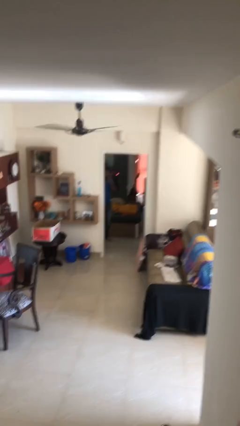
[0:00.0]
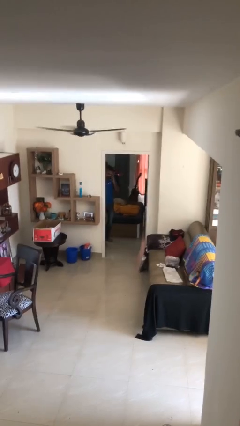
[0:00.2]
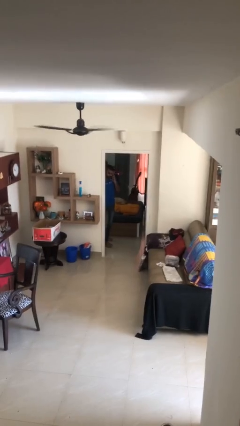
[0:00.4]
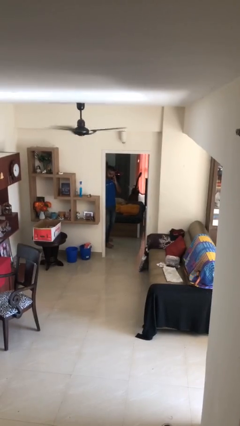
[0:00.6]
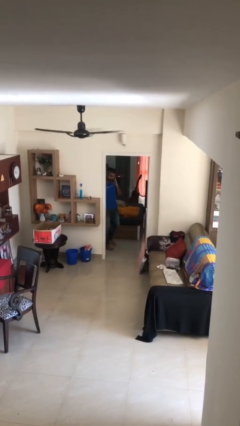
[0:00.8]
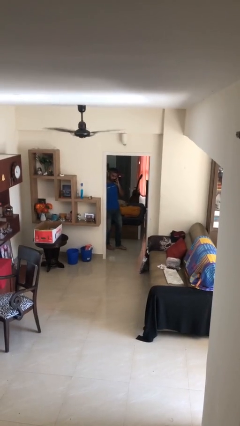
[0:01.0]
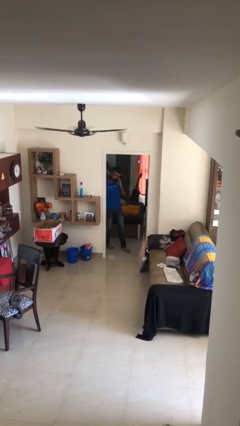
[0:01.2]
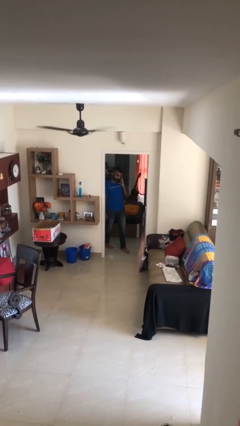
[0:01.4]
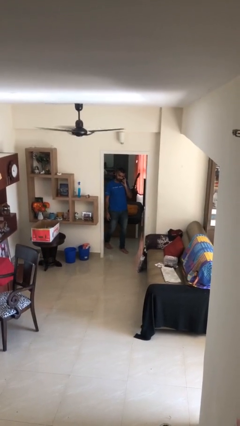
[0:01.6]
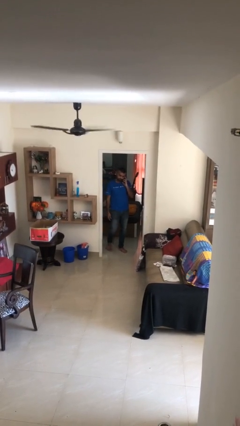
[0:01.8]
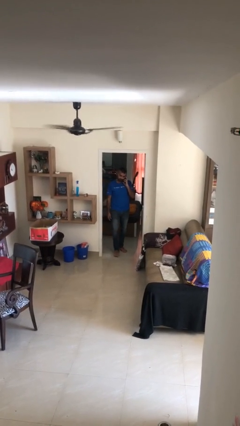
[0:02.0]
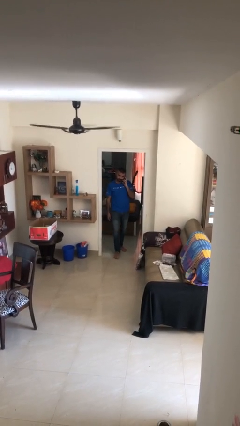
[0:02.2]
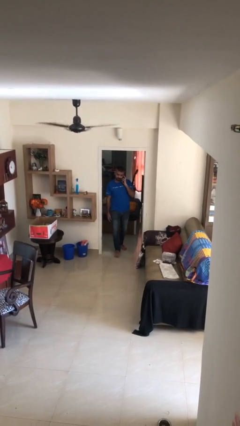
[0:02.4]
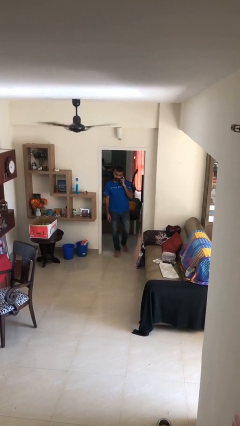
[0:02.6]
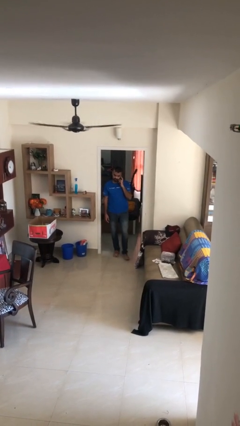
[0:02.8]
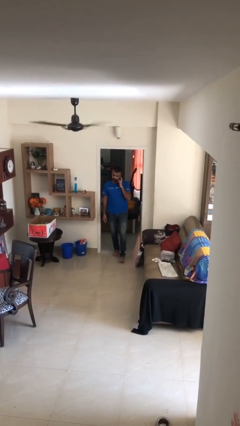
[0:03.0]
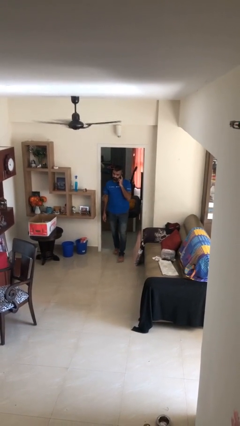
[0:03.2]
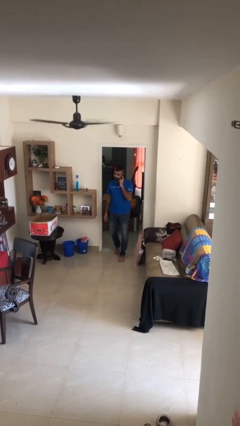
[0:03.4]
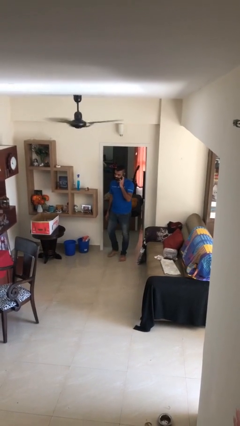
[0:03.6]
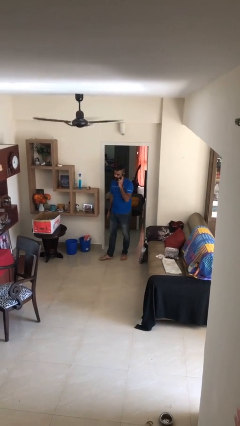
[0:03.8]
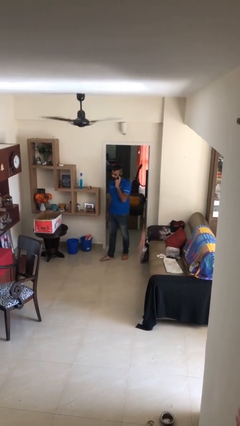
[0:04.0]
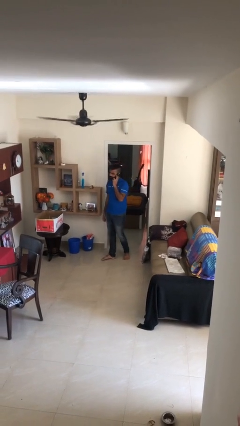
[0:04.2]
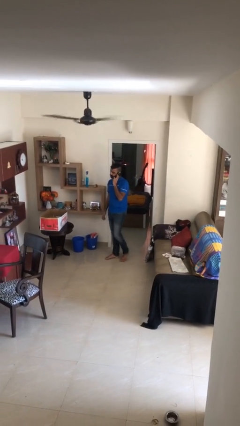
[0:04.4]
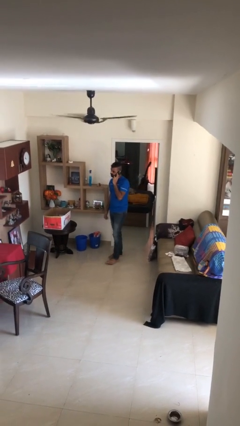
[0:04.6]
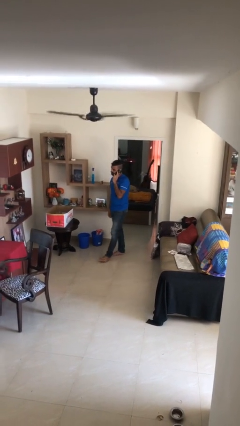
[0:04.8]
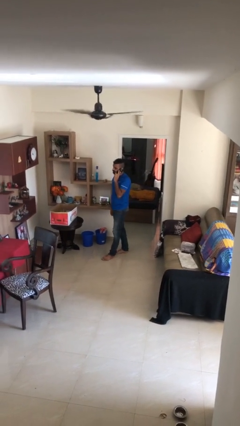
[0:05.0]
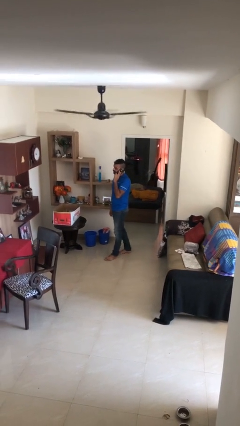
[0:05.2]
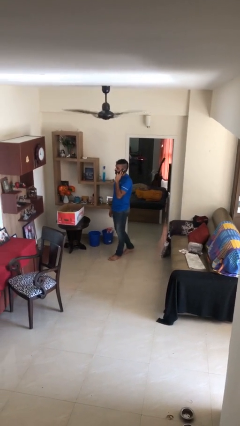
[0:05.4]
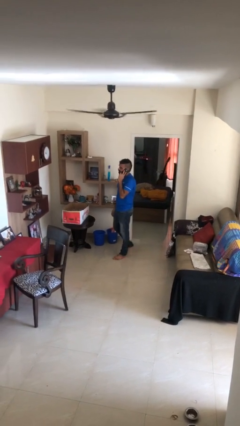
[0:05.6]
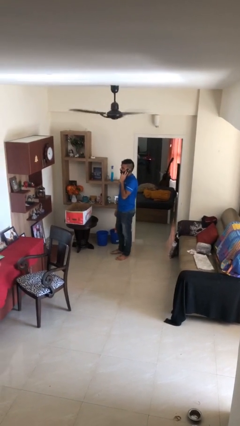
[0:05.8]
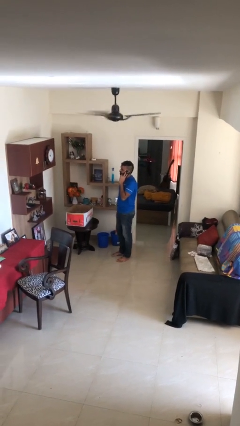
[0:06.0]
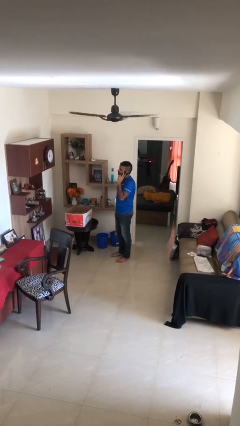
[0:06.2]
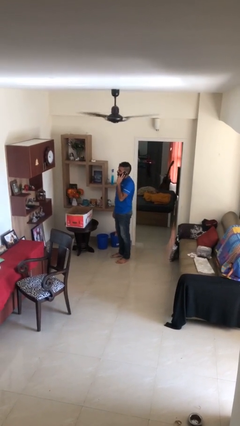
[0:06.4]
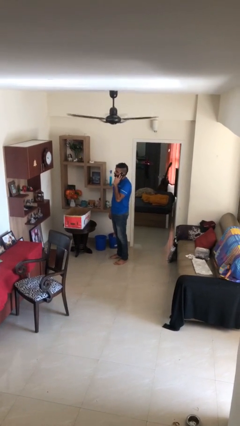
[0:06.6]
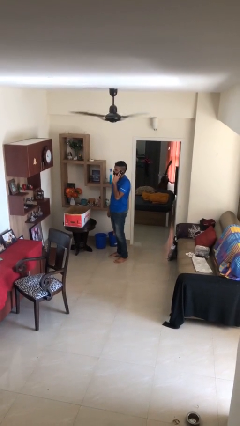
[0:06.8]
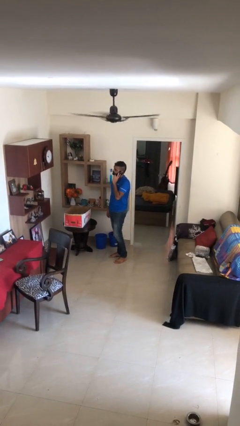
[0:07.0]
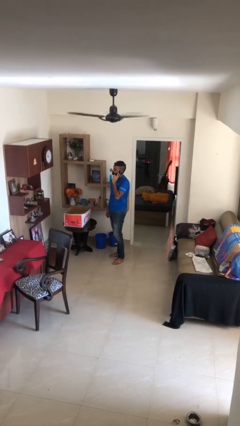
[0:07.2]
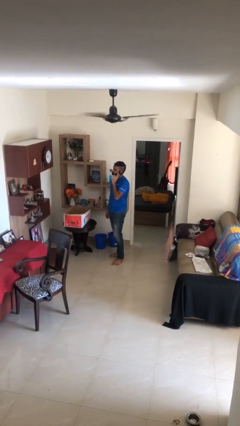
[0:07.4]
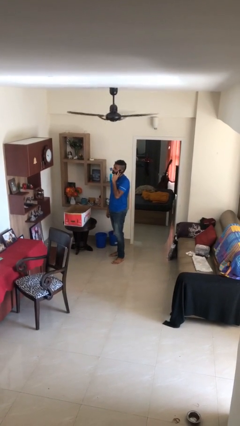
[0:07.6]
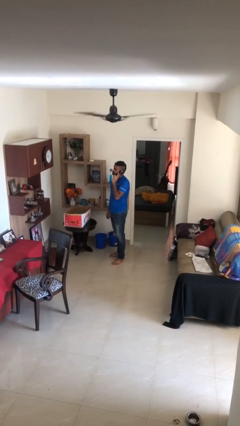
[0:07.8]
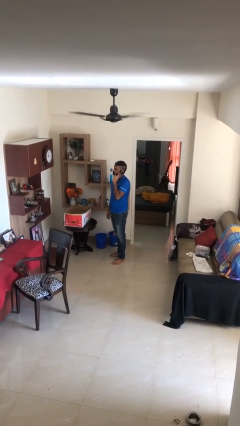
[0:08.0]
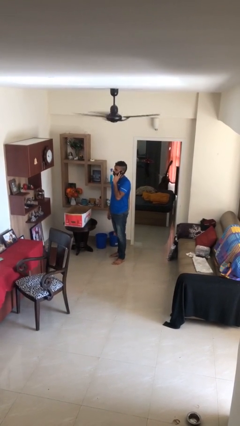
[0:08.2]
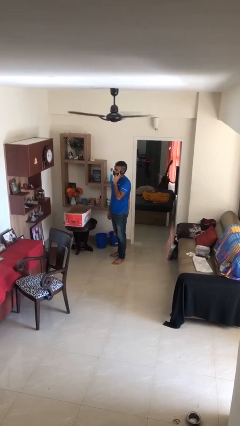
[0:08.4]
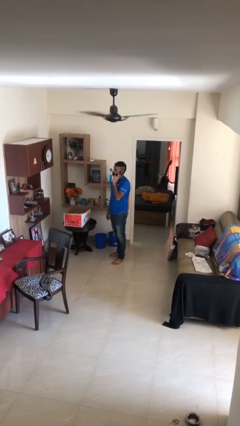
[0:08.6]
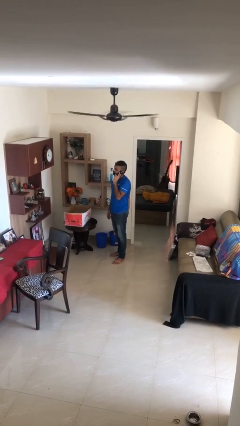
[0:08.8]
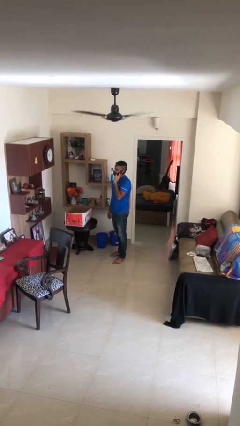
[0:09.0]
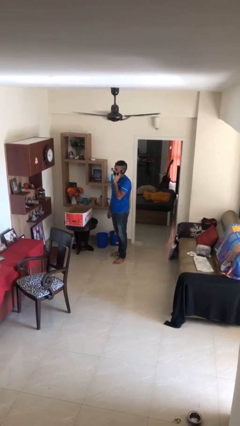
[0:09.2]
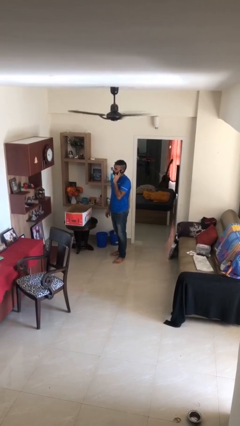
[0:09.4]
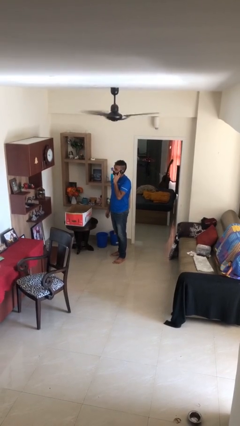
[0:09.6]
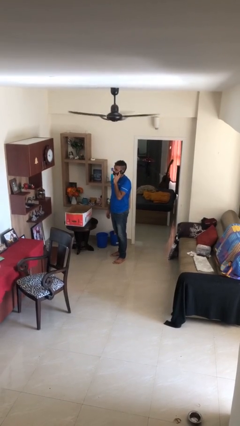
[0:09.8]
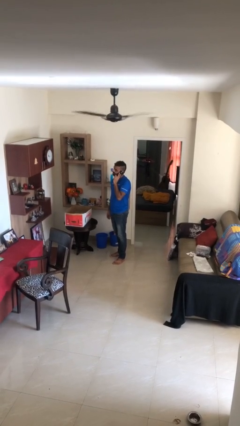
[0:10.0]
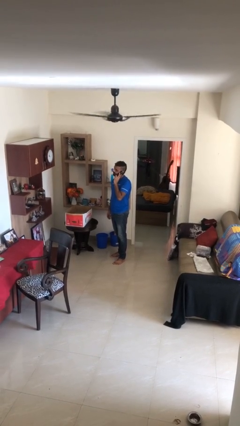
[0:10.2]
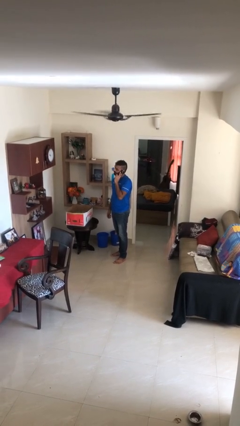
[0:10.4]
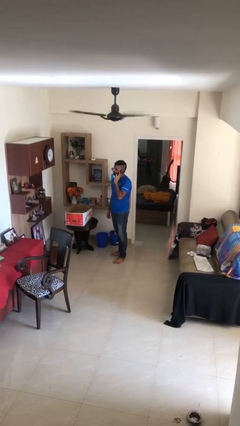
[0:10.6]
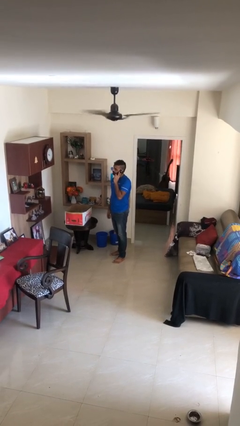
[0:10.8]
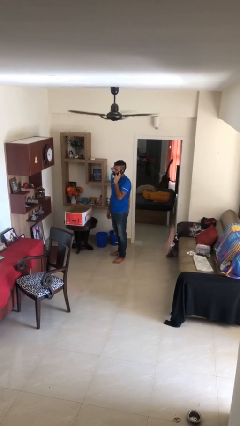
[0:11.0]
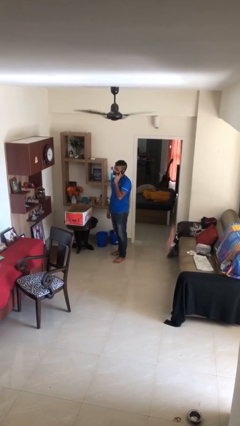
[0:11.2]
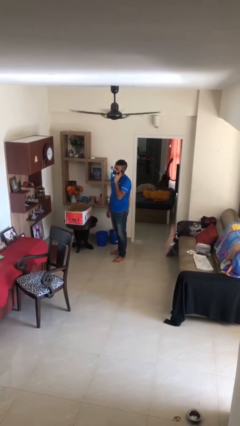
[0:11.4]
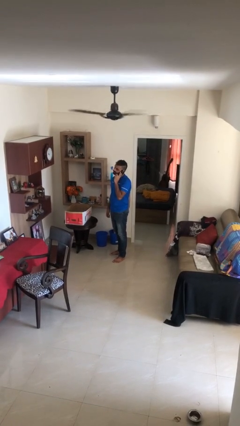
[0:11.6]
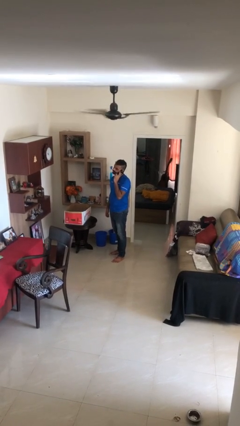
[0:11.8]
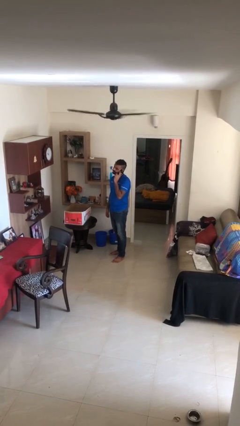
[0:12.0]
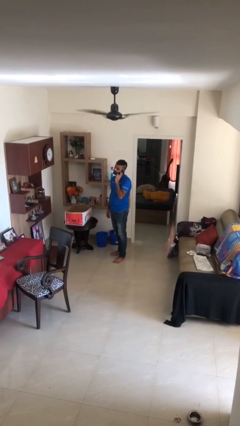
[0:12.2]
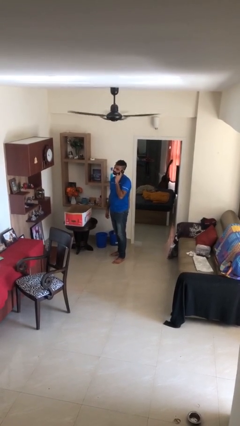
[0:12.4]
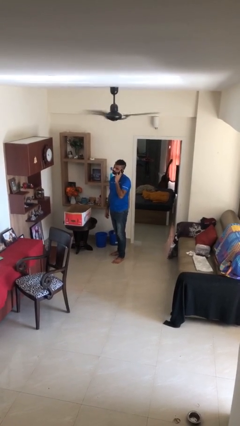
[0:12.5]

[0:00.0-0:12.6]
person enters scene through structure

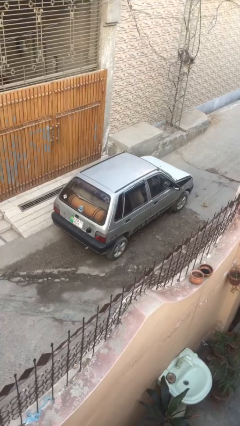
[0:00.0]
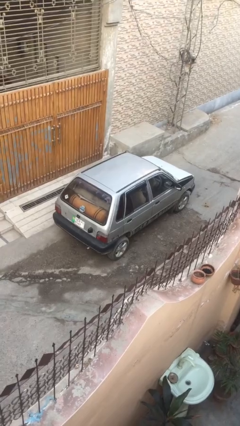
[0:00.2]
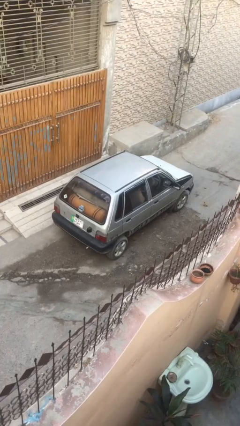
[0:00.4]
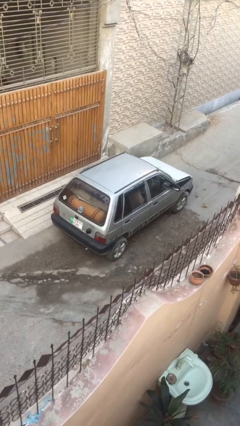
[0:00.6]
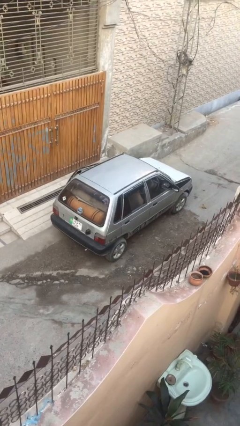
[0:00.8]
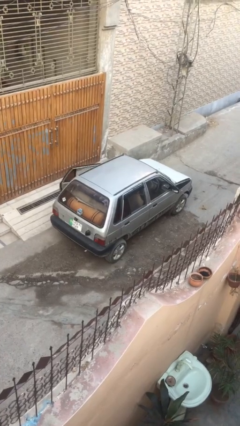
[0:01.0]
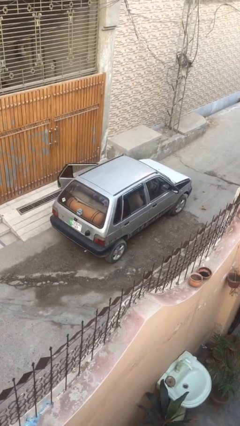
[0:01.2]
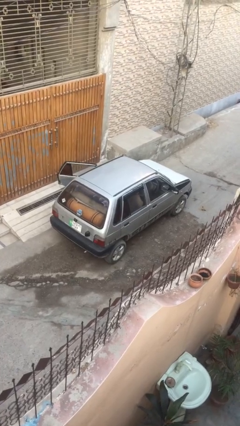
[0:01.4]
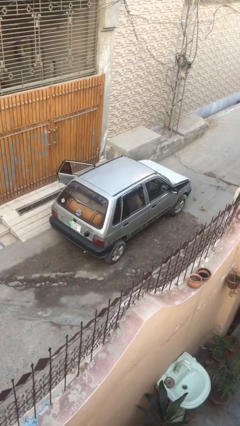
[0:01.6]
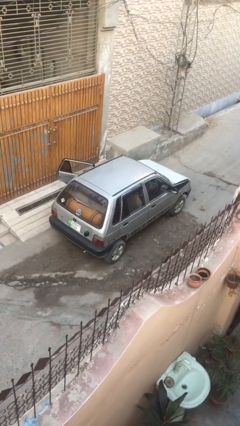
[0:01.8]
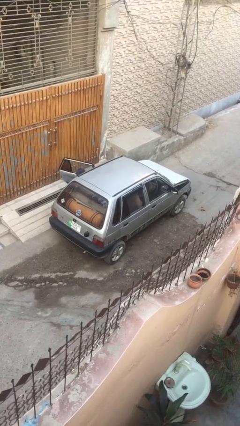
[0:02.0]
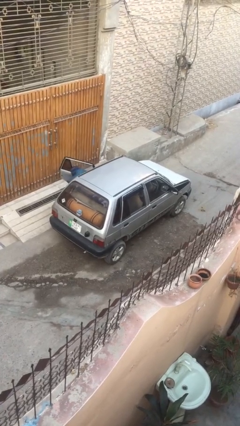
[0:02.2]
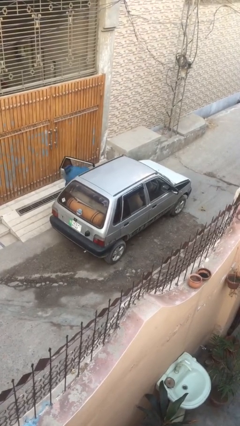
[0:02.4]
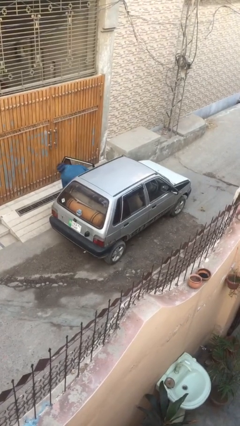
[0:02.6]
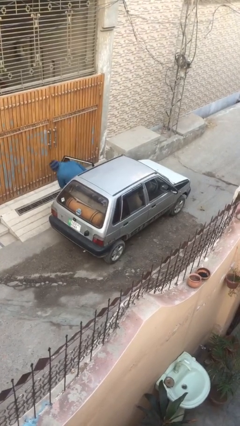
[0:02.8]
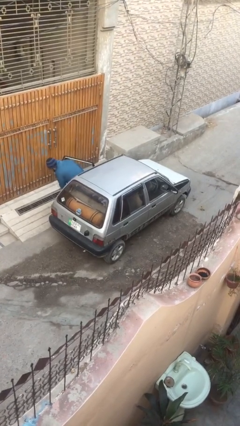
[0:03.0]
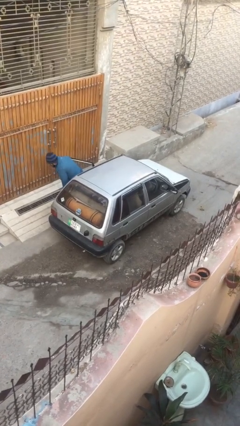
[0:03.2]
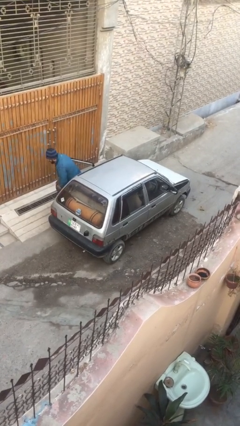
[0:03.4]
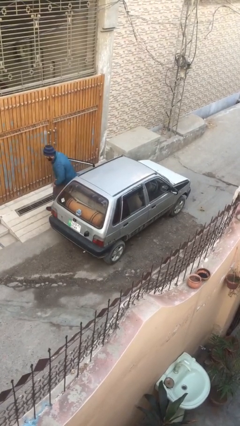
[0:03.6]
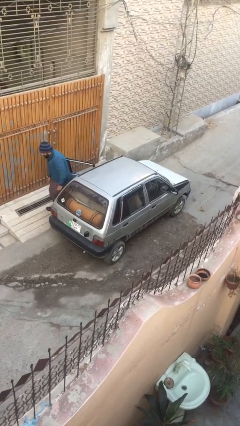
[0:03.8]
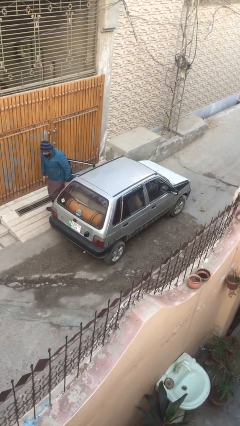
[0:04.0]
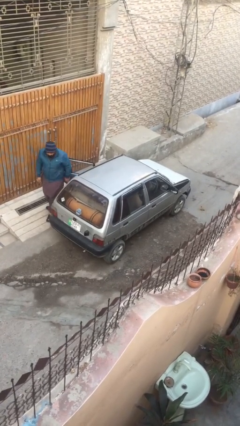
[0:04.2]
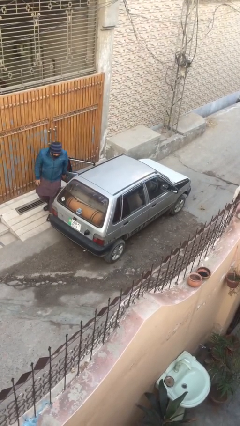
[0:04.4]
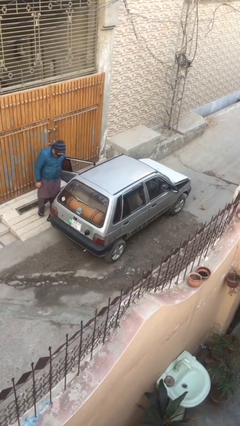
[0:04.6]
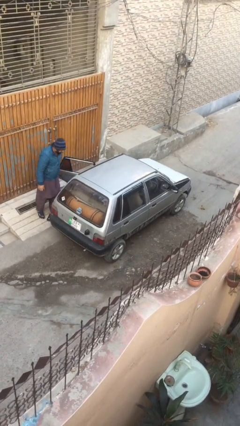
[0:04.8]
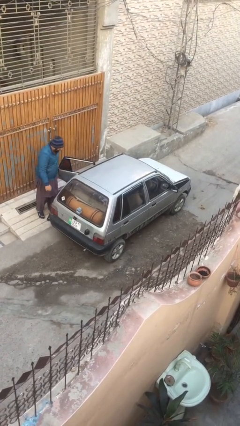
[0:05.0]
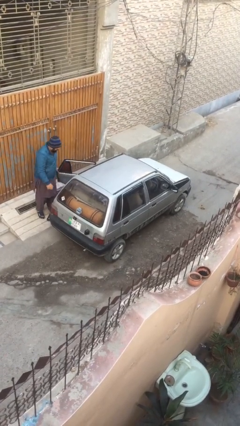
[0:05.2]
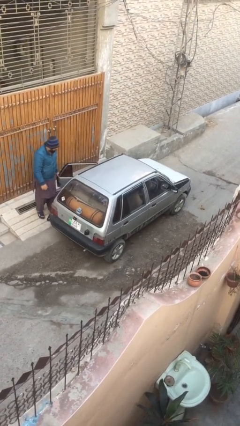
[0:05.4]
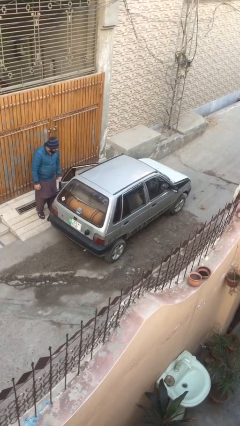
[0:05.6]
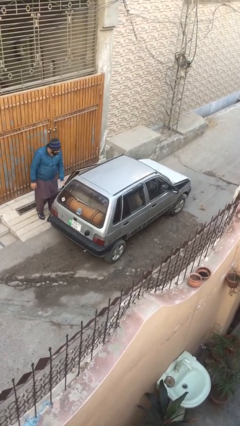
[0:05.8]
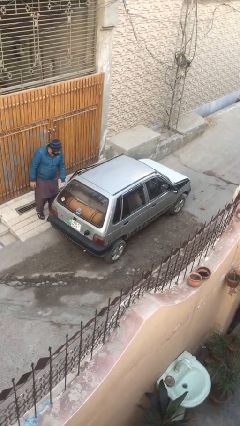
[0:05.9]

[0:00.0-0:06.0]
car drops off person
